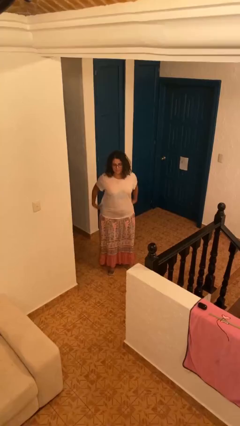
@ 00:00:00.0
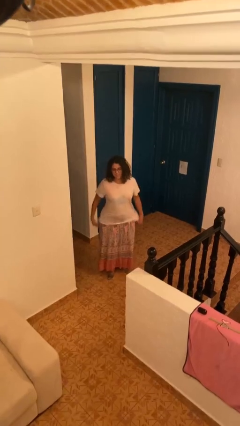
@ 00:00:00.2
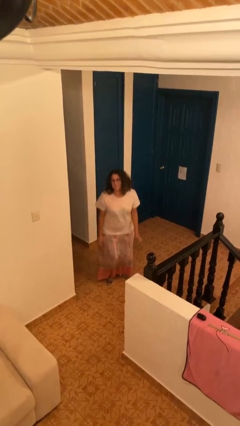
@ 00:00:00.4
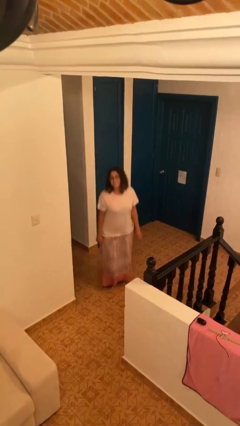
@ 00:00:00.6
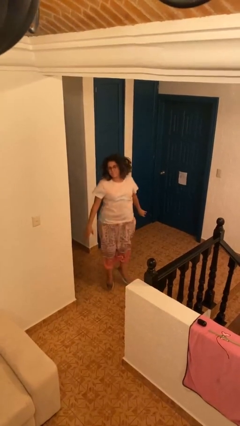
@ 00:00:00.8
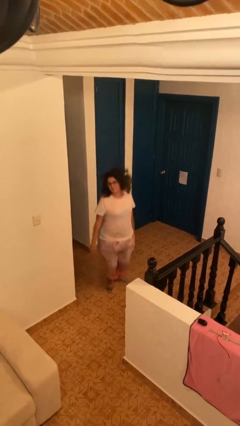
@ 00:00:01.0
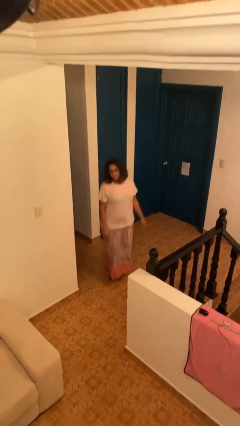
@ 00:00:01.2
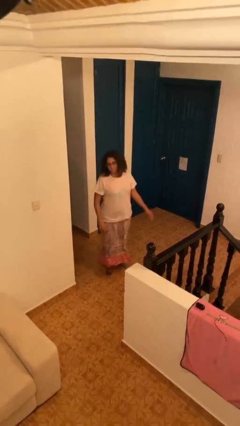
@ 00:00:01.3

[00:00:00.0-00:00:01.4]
person jumps

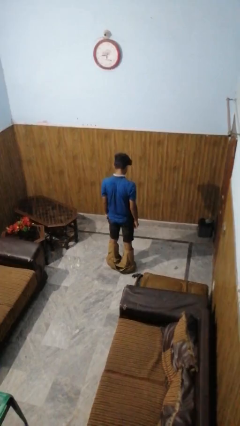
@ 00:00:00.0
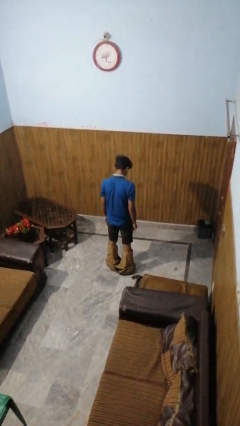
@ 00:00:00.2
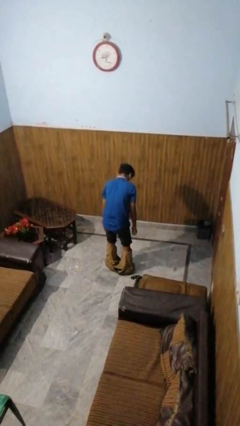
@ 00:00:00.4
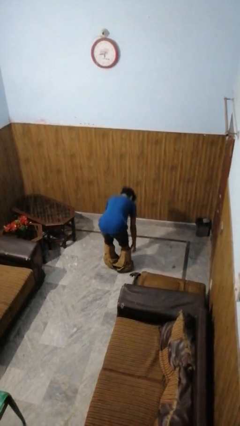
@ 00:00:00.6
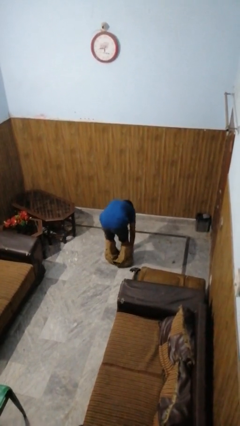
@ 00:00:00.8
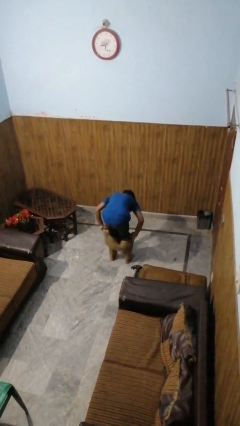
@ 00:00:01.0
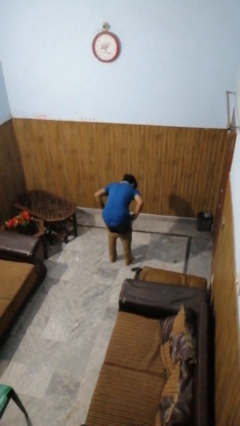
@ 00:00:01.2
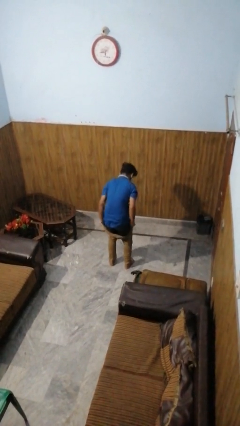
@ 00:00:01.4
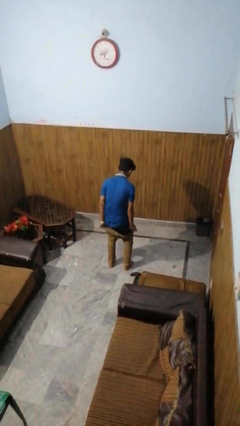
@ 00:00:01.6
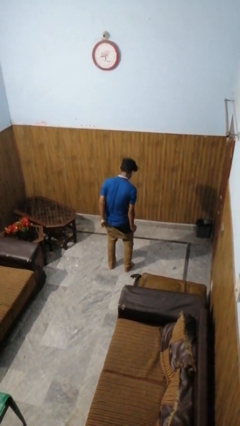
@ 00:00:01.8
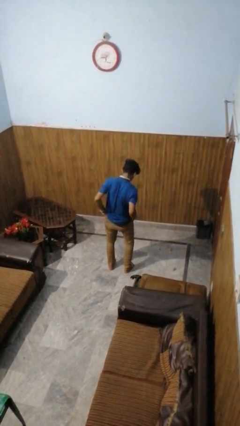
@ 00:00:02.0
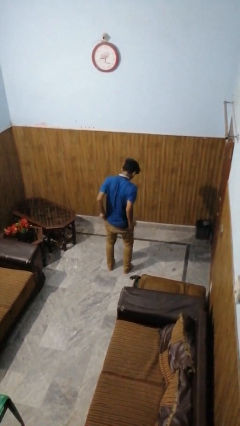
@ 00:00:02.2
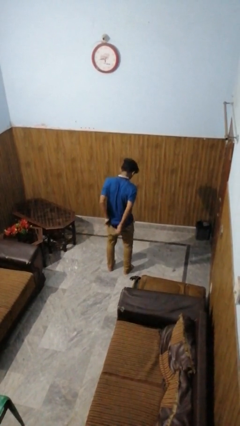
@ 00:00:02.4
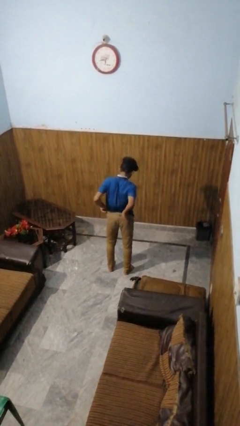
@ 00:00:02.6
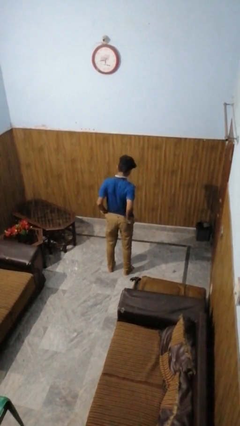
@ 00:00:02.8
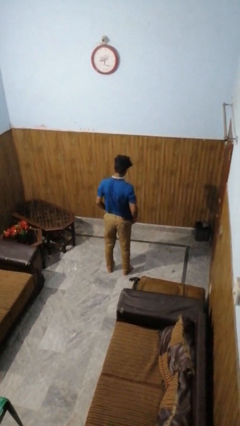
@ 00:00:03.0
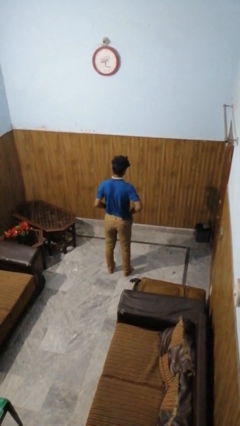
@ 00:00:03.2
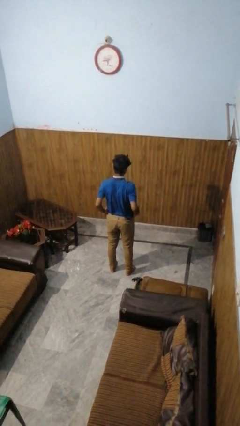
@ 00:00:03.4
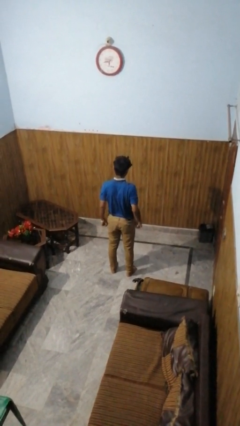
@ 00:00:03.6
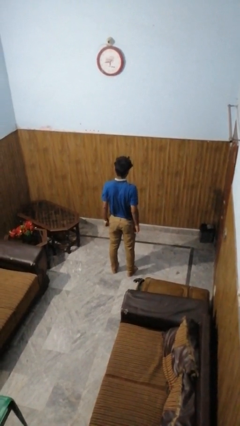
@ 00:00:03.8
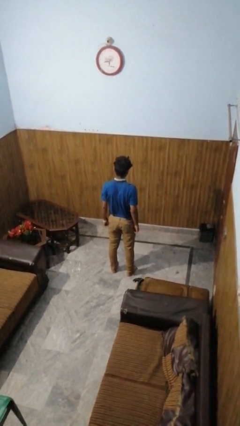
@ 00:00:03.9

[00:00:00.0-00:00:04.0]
person puts on pants

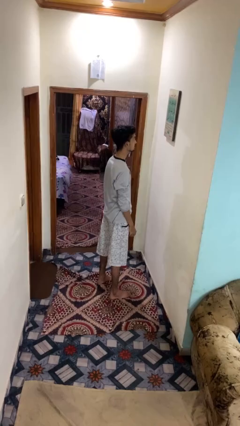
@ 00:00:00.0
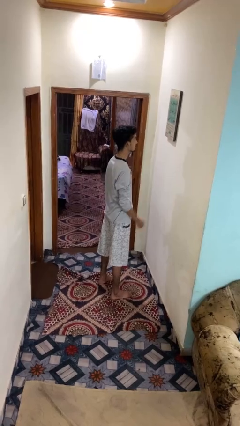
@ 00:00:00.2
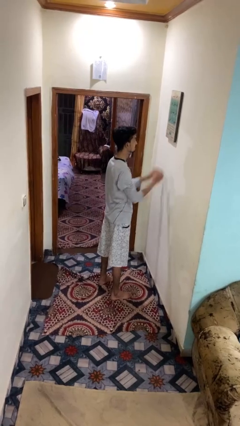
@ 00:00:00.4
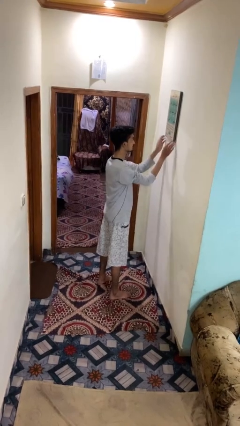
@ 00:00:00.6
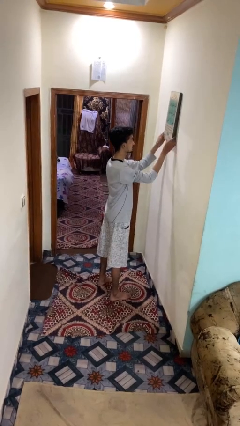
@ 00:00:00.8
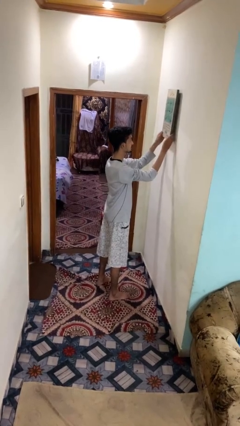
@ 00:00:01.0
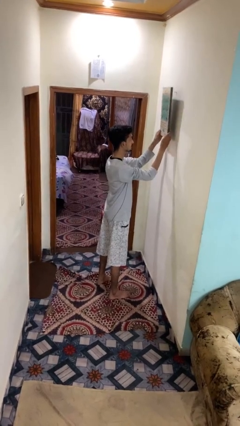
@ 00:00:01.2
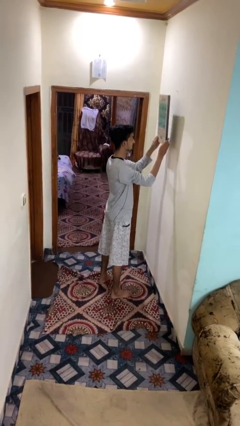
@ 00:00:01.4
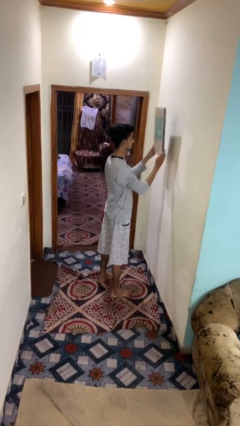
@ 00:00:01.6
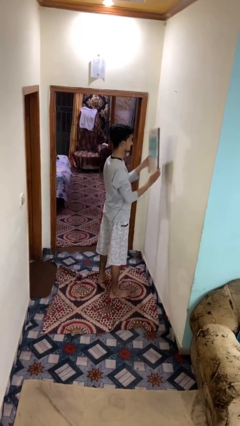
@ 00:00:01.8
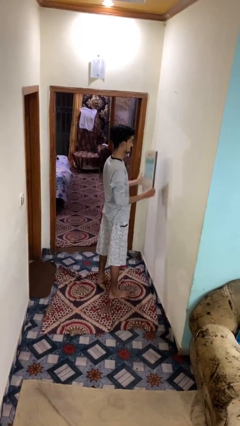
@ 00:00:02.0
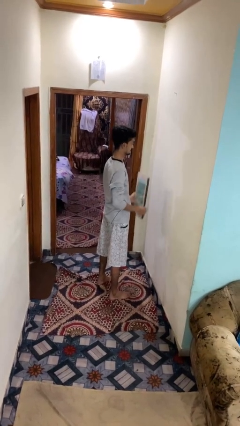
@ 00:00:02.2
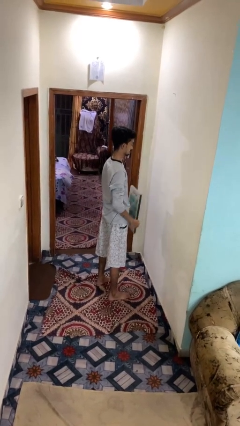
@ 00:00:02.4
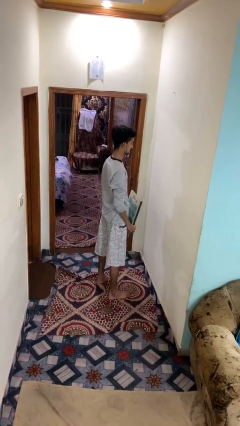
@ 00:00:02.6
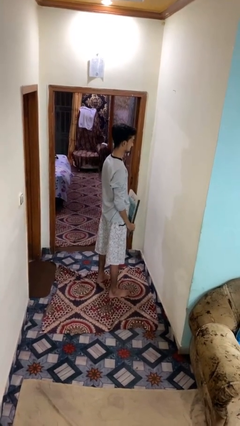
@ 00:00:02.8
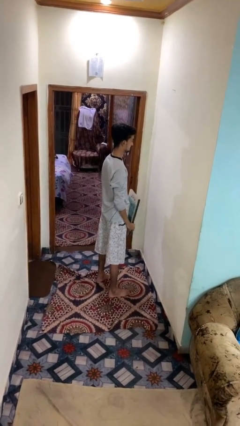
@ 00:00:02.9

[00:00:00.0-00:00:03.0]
person takes down picture frame

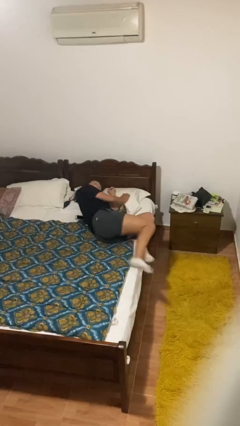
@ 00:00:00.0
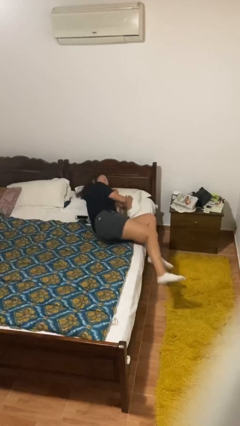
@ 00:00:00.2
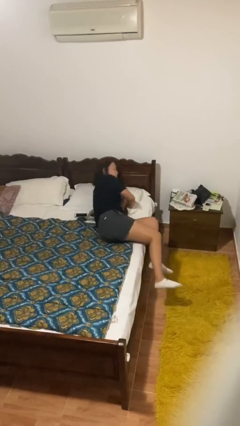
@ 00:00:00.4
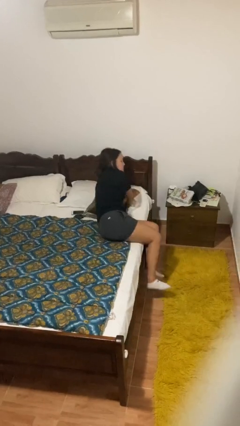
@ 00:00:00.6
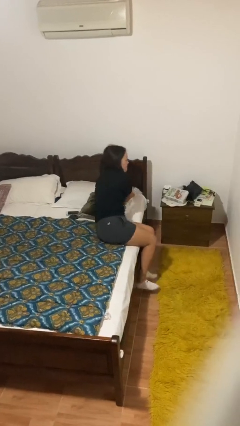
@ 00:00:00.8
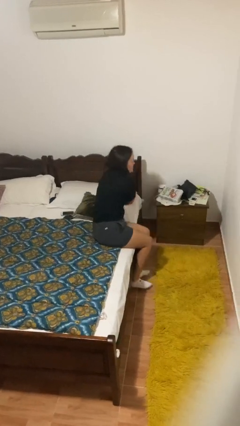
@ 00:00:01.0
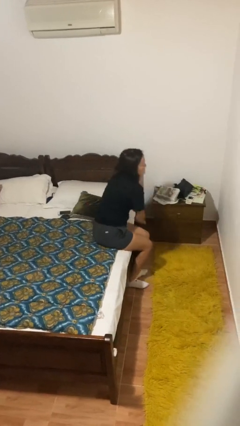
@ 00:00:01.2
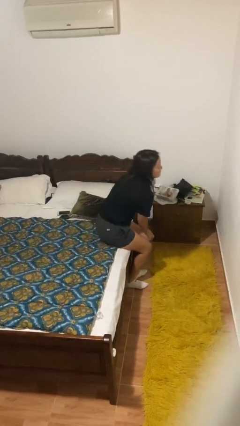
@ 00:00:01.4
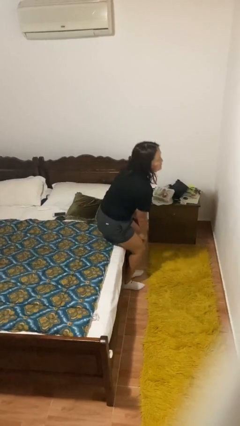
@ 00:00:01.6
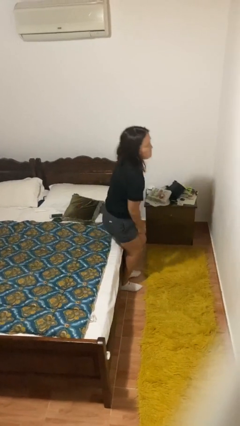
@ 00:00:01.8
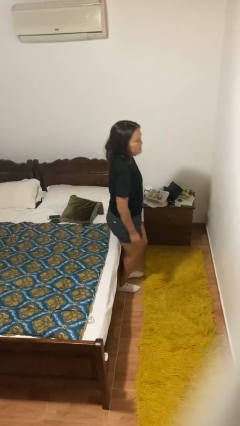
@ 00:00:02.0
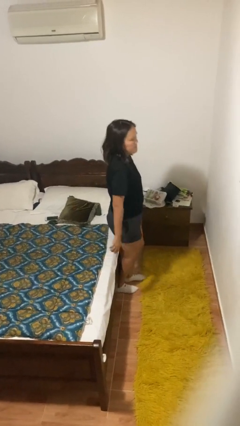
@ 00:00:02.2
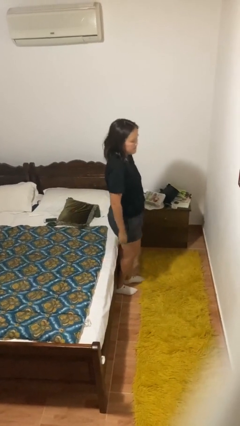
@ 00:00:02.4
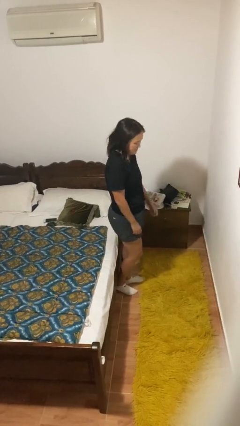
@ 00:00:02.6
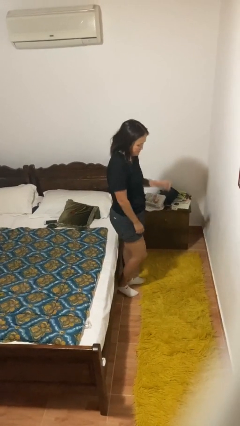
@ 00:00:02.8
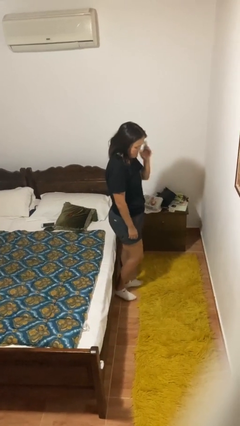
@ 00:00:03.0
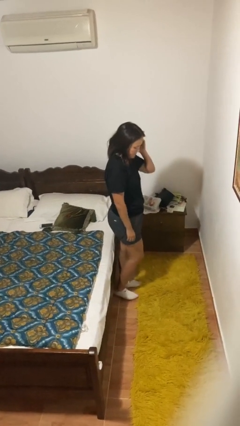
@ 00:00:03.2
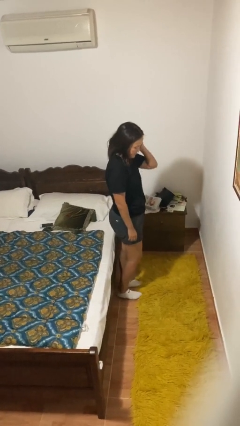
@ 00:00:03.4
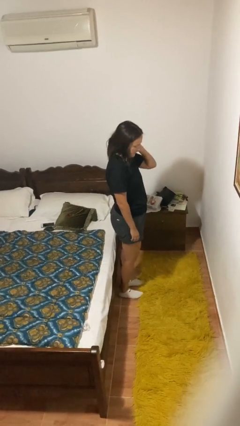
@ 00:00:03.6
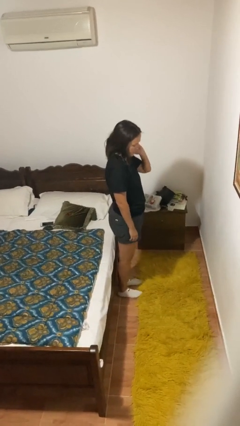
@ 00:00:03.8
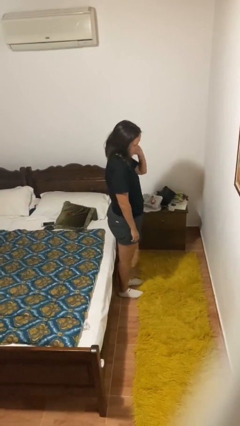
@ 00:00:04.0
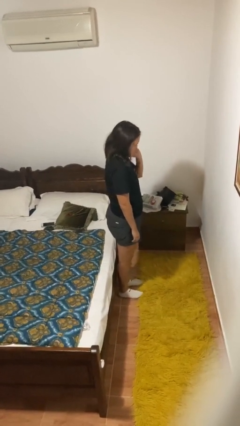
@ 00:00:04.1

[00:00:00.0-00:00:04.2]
person stands up

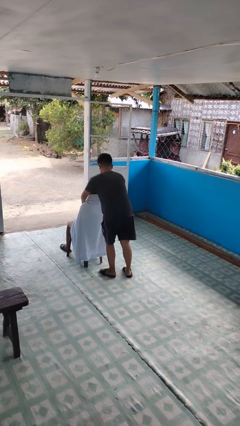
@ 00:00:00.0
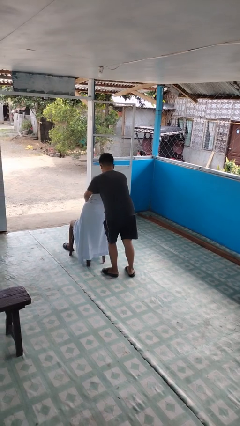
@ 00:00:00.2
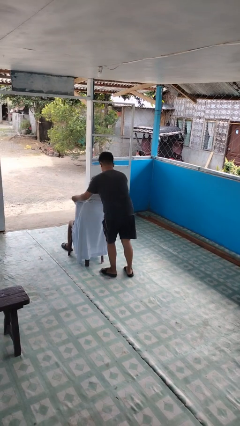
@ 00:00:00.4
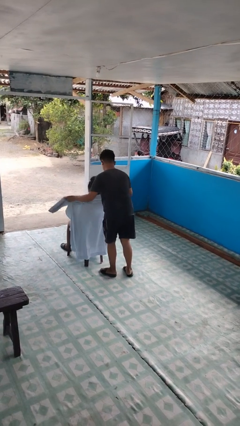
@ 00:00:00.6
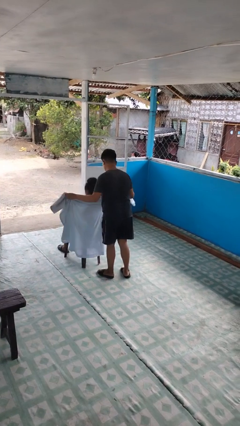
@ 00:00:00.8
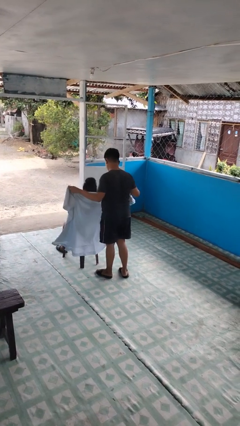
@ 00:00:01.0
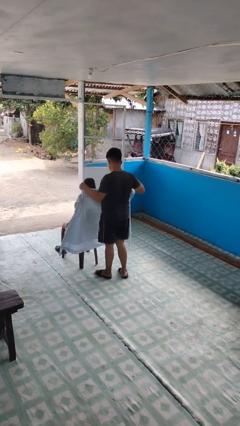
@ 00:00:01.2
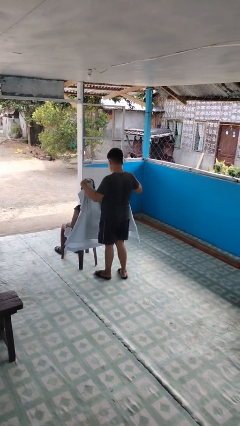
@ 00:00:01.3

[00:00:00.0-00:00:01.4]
person uncovers friend with blanket

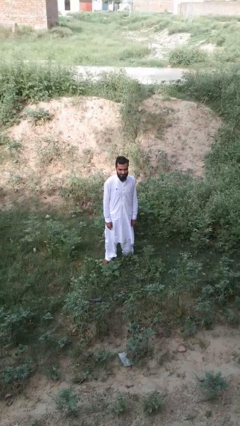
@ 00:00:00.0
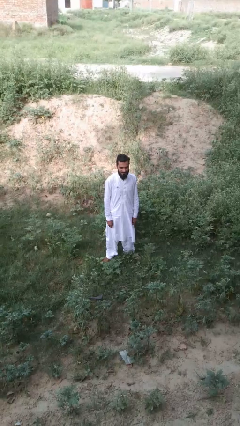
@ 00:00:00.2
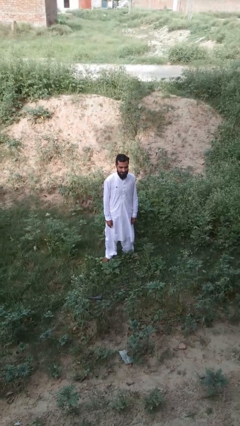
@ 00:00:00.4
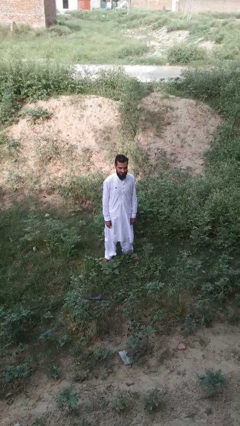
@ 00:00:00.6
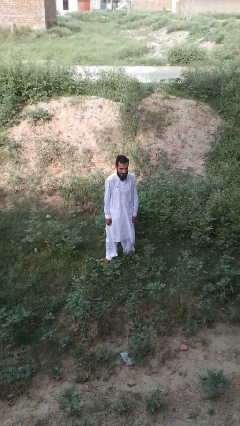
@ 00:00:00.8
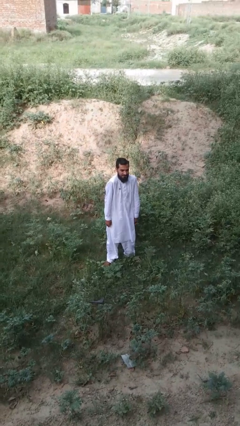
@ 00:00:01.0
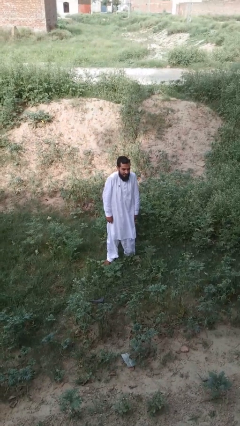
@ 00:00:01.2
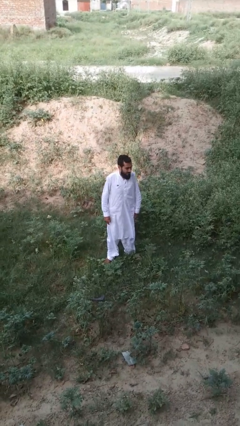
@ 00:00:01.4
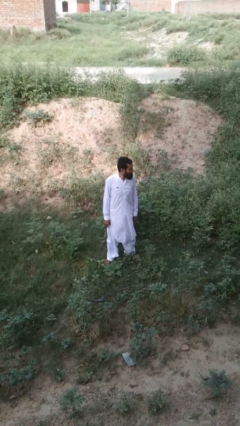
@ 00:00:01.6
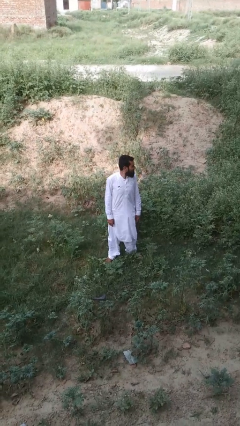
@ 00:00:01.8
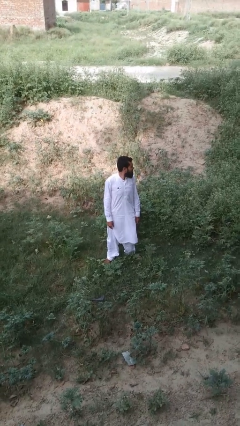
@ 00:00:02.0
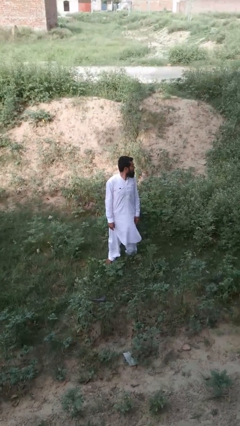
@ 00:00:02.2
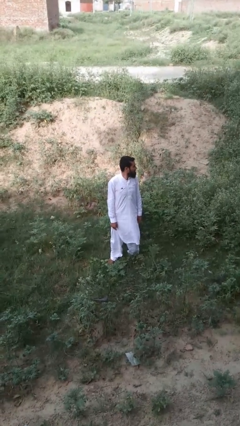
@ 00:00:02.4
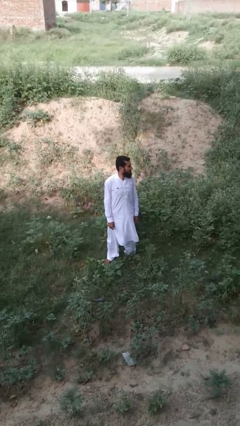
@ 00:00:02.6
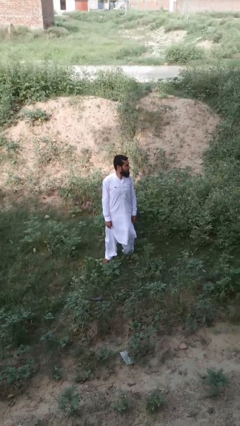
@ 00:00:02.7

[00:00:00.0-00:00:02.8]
person shrugs
